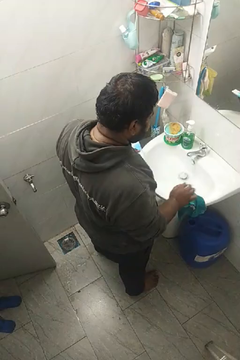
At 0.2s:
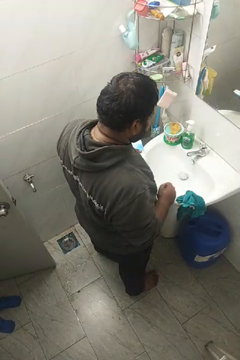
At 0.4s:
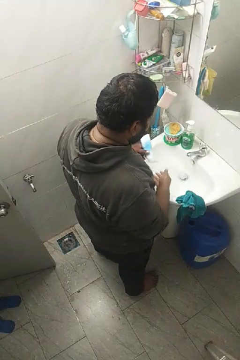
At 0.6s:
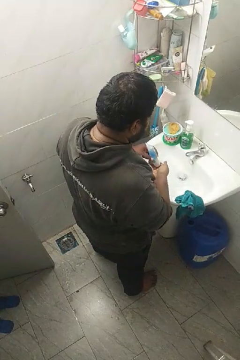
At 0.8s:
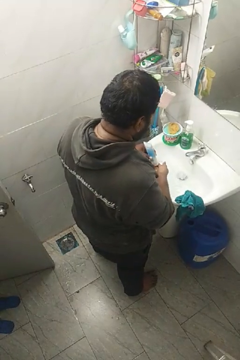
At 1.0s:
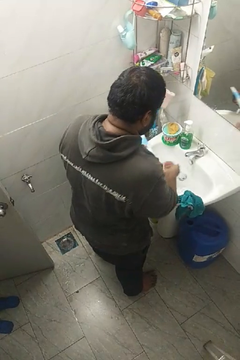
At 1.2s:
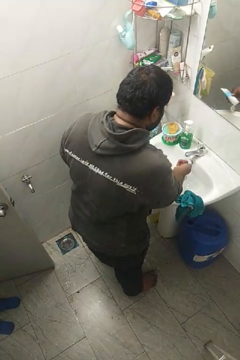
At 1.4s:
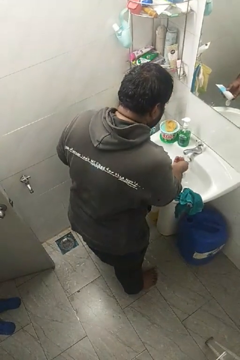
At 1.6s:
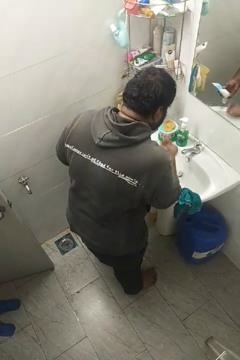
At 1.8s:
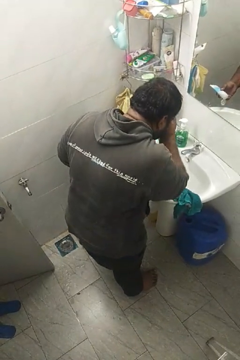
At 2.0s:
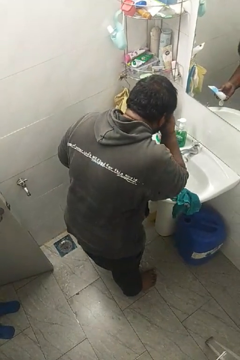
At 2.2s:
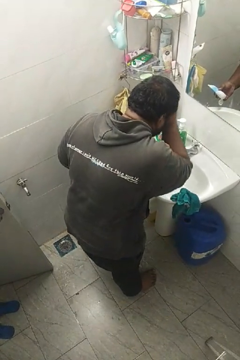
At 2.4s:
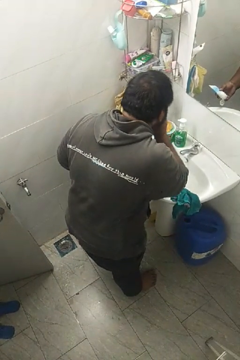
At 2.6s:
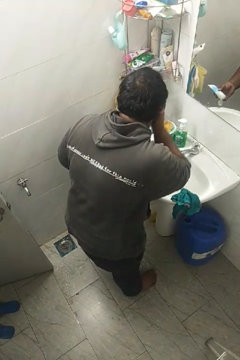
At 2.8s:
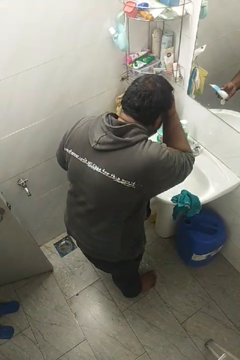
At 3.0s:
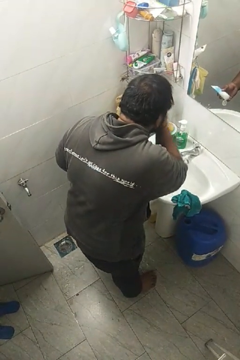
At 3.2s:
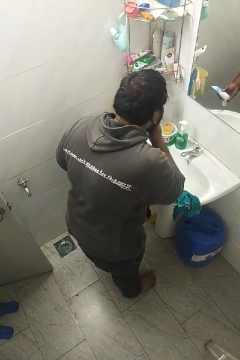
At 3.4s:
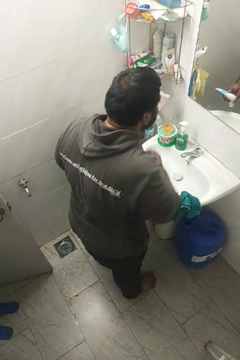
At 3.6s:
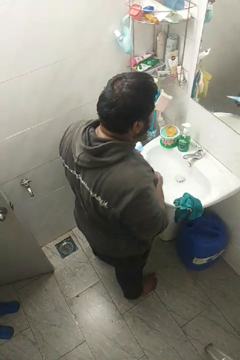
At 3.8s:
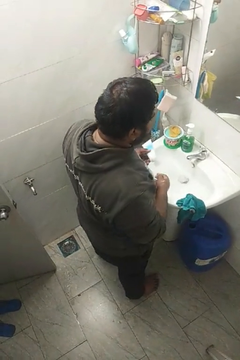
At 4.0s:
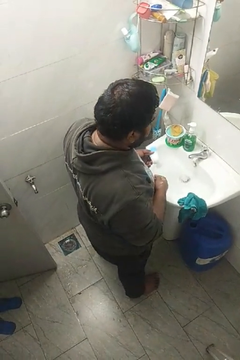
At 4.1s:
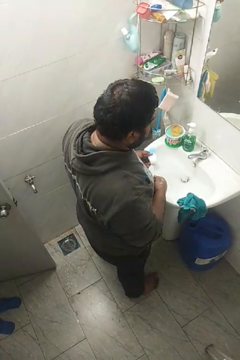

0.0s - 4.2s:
person washes face

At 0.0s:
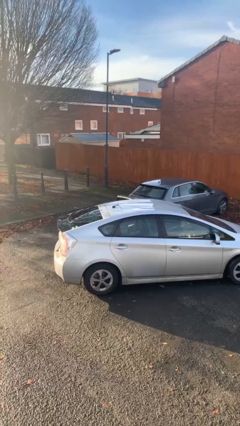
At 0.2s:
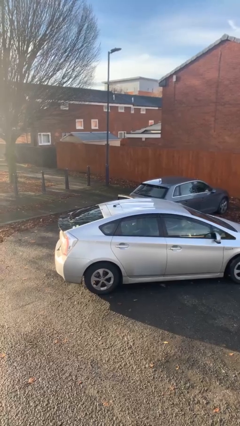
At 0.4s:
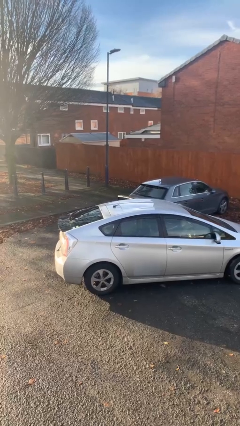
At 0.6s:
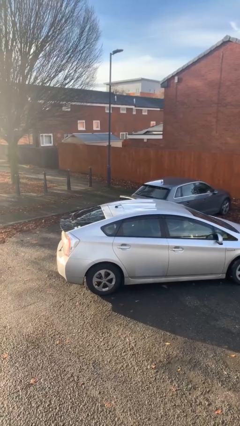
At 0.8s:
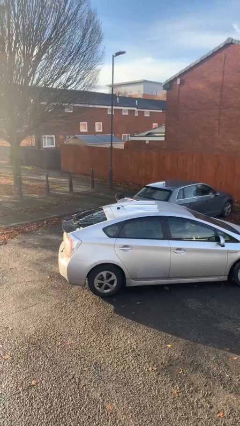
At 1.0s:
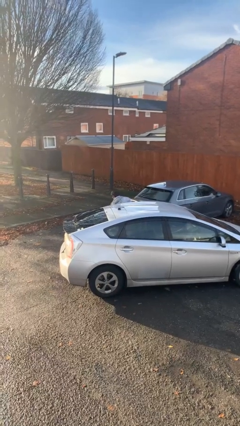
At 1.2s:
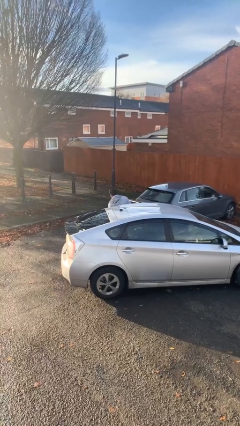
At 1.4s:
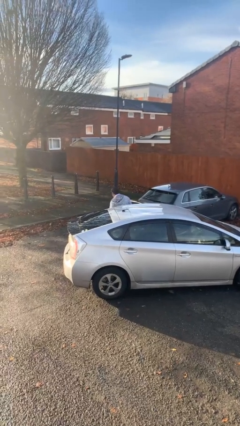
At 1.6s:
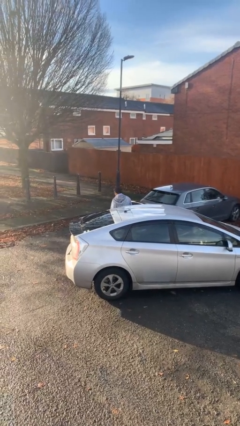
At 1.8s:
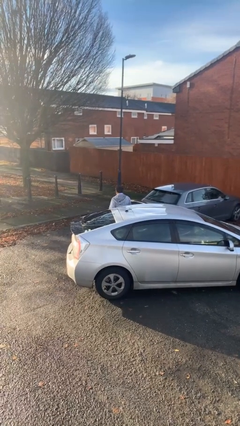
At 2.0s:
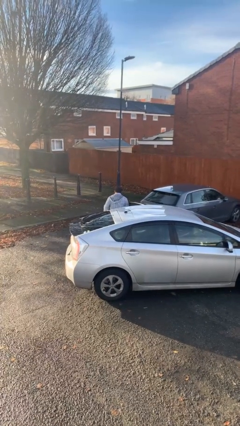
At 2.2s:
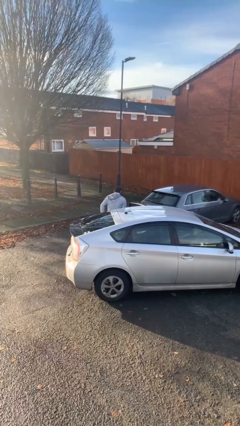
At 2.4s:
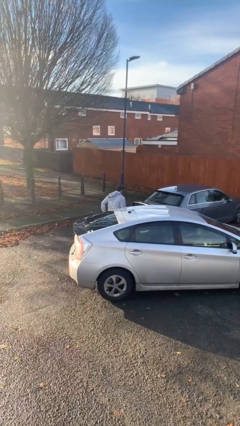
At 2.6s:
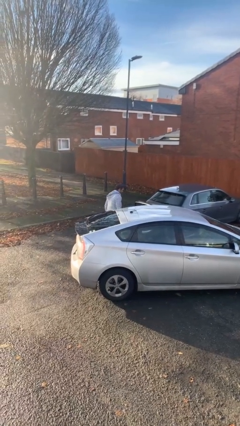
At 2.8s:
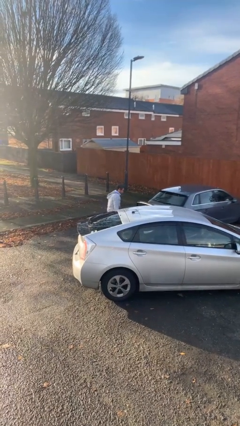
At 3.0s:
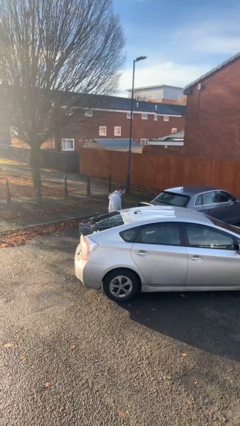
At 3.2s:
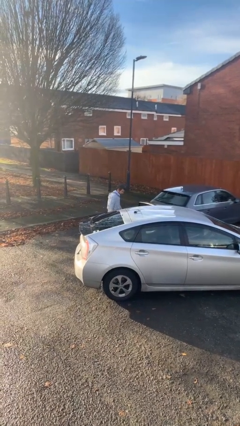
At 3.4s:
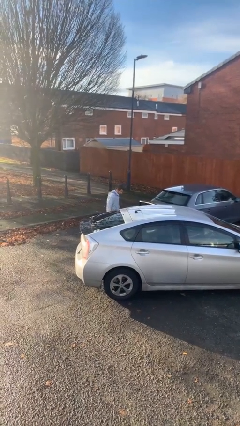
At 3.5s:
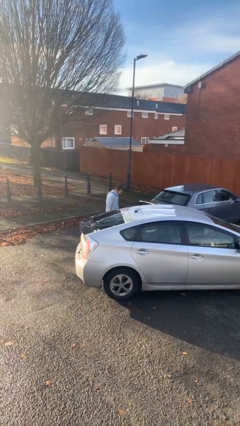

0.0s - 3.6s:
person exits car

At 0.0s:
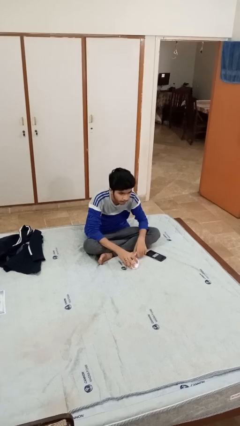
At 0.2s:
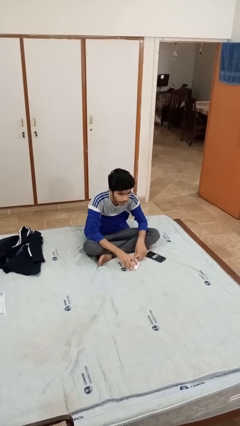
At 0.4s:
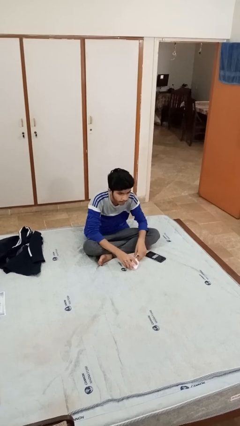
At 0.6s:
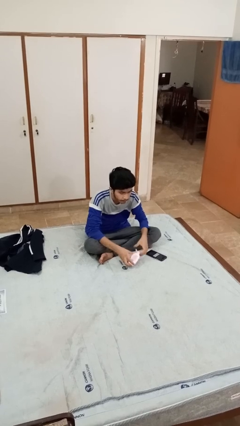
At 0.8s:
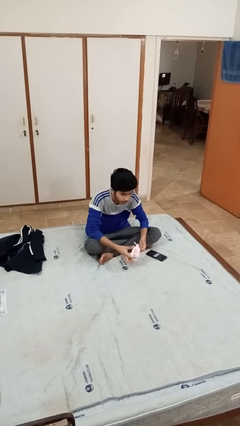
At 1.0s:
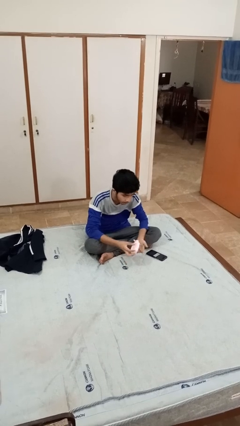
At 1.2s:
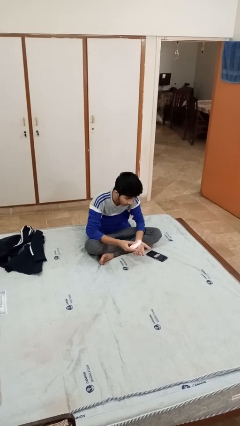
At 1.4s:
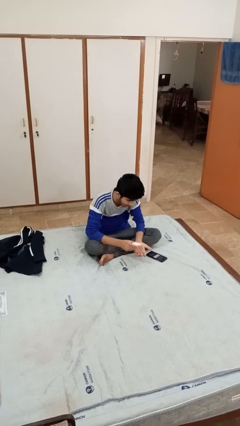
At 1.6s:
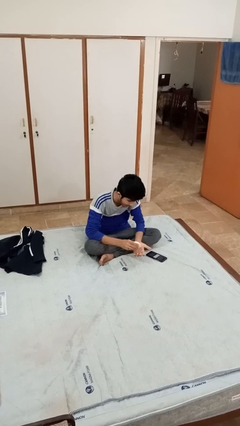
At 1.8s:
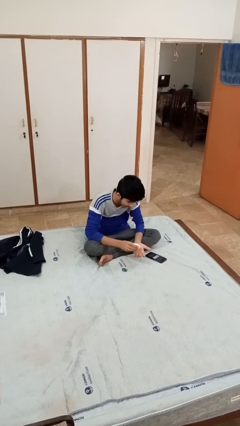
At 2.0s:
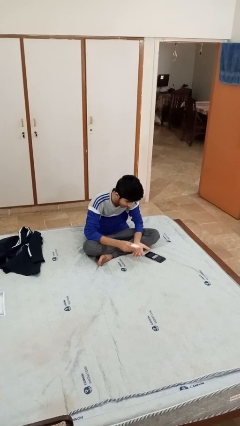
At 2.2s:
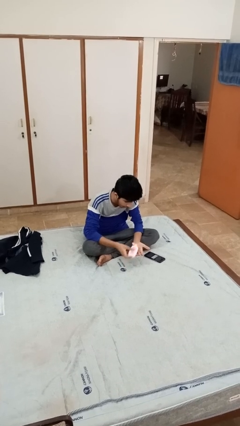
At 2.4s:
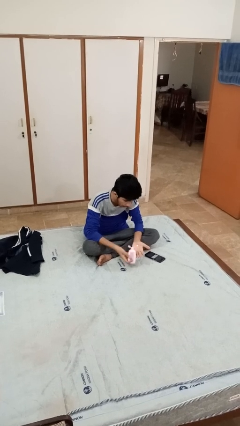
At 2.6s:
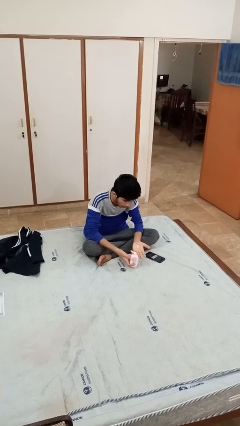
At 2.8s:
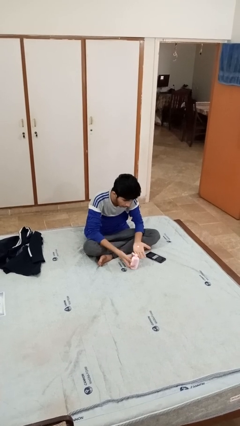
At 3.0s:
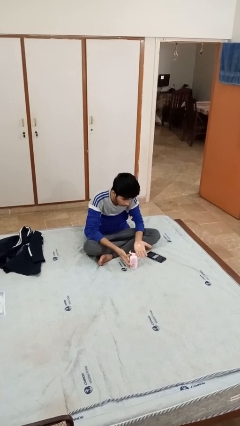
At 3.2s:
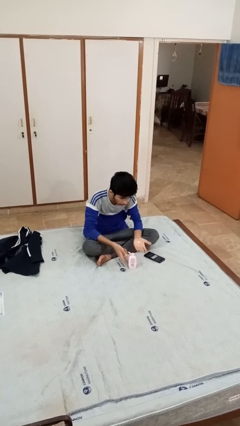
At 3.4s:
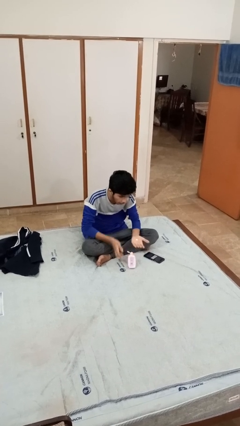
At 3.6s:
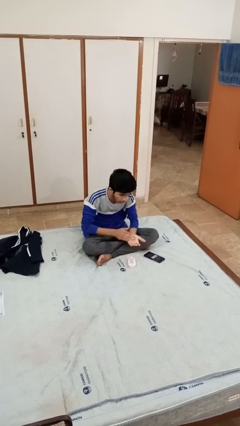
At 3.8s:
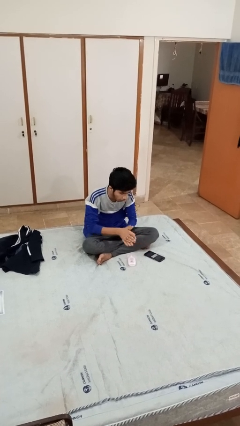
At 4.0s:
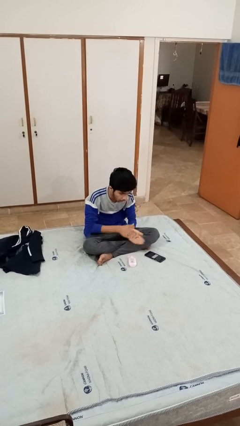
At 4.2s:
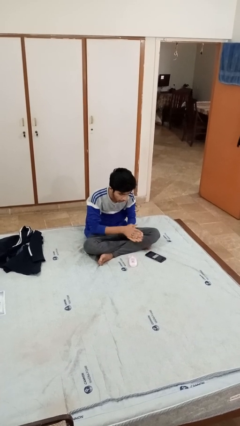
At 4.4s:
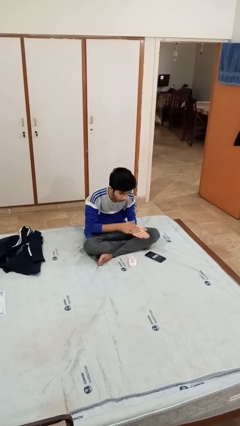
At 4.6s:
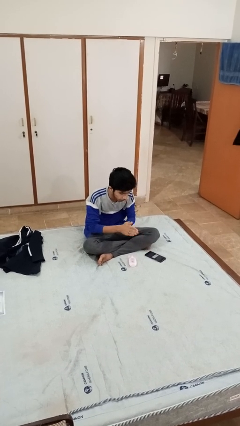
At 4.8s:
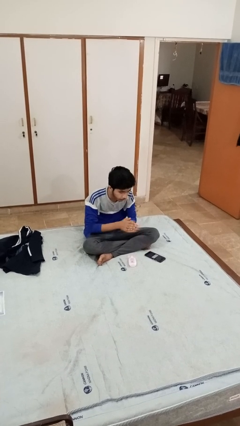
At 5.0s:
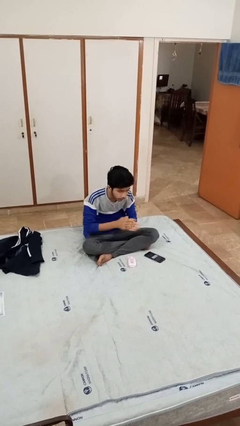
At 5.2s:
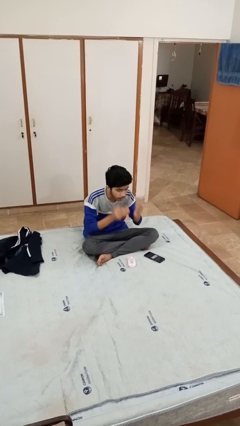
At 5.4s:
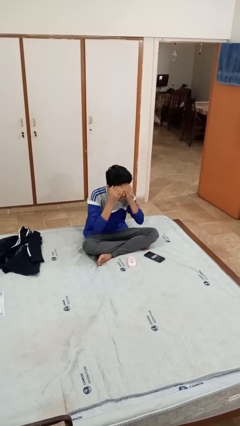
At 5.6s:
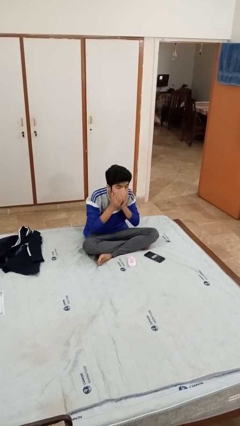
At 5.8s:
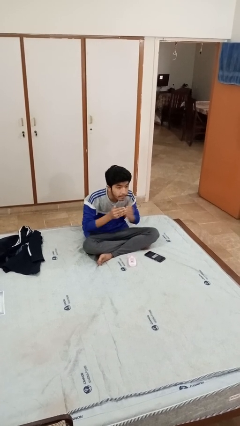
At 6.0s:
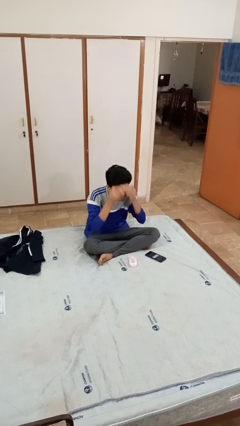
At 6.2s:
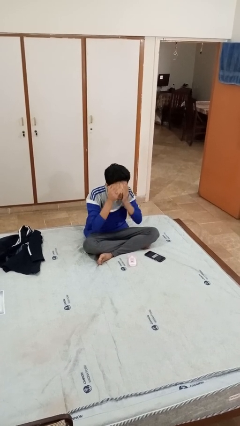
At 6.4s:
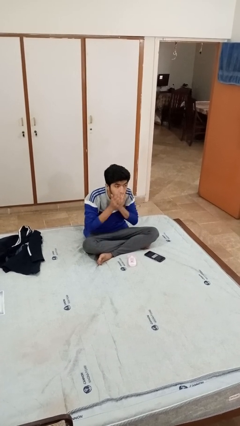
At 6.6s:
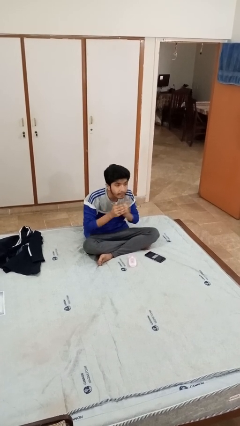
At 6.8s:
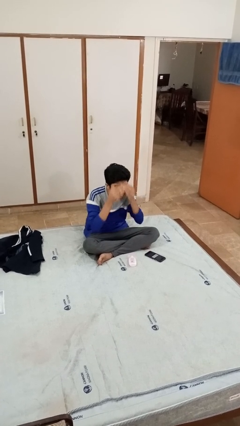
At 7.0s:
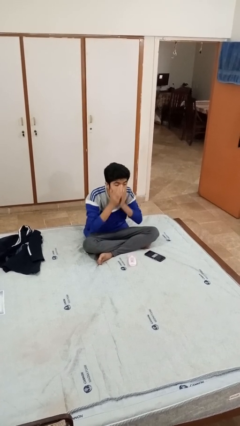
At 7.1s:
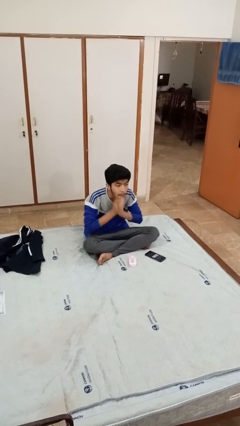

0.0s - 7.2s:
person applies facial moisturizer

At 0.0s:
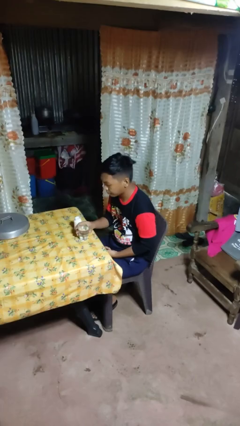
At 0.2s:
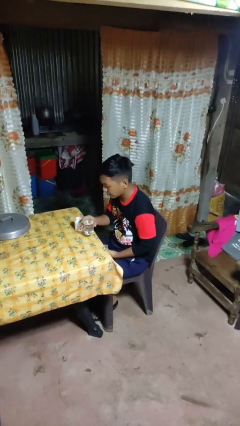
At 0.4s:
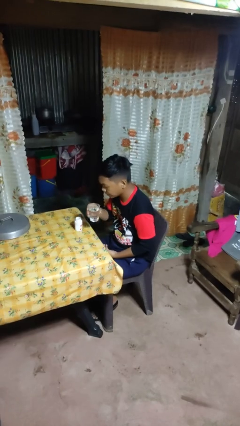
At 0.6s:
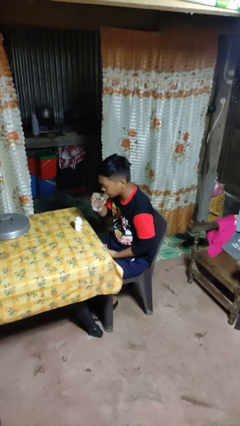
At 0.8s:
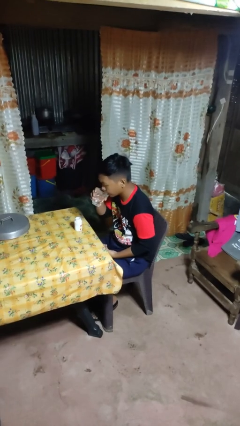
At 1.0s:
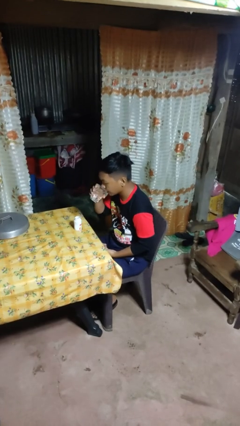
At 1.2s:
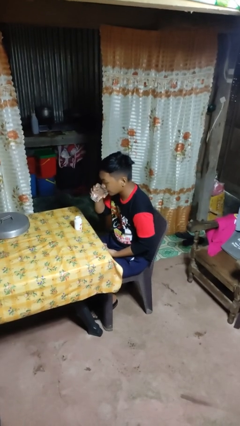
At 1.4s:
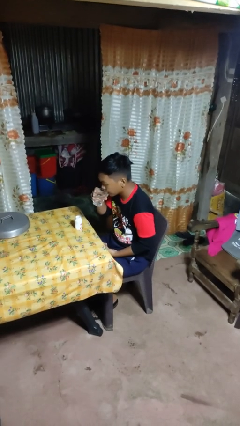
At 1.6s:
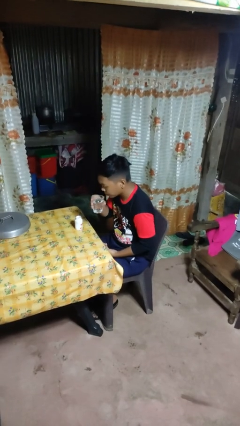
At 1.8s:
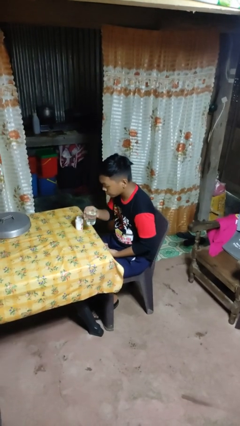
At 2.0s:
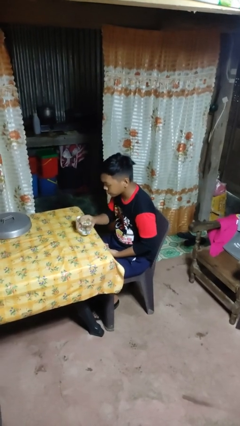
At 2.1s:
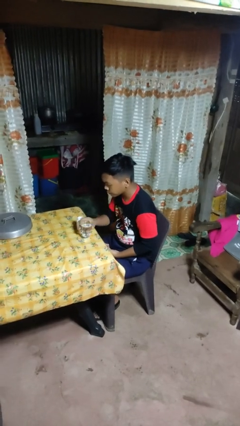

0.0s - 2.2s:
person drinks from cup

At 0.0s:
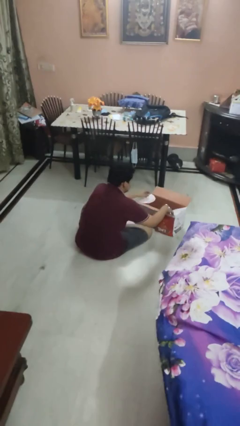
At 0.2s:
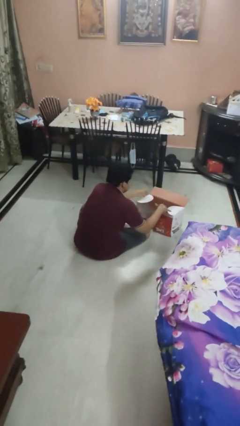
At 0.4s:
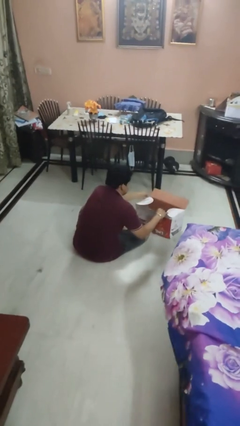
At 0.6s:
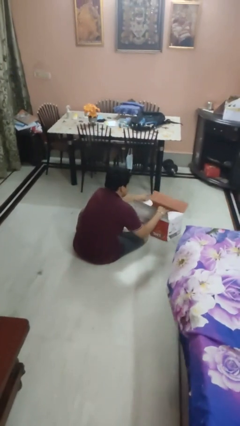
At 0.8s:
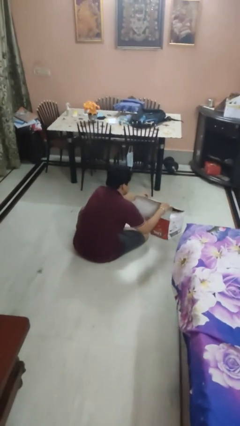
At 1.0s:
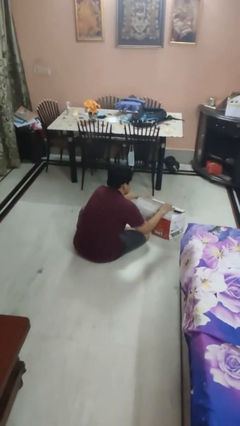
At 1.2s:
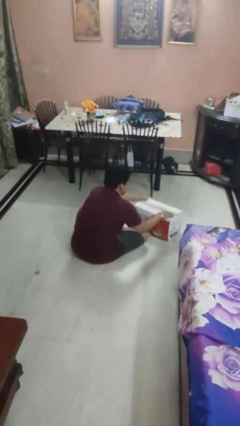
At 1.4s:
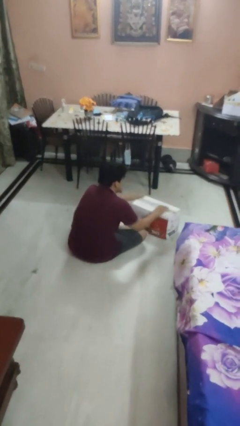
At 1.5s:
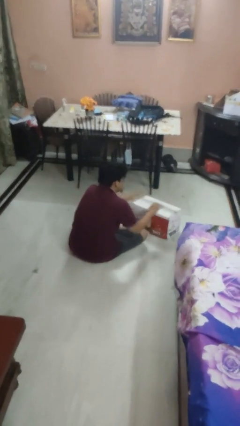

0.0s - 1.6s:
person closes box
